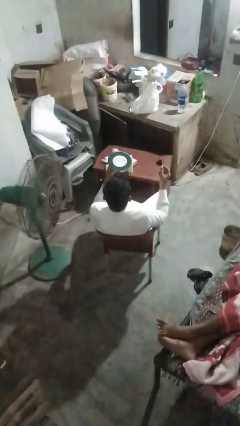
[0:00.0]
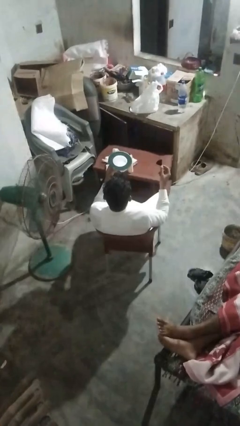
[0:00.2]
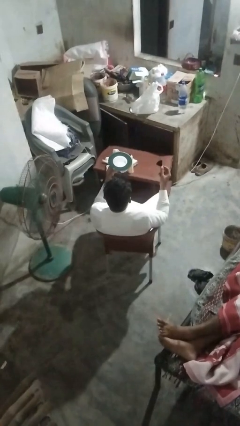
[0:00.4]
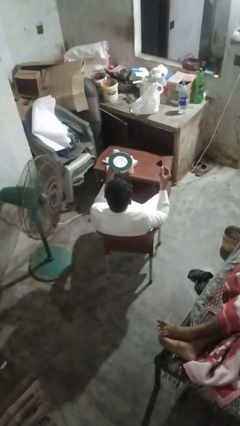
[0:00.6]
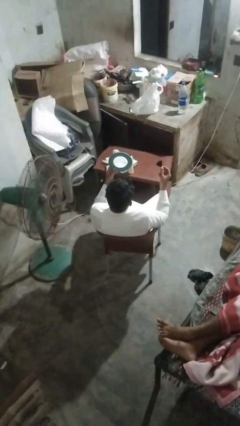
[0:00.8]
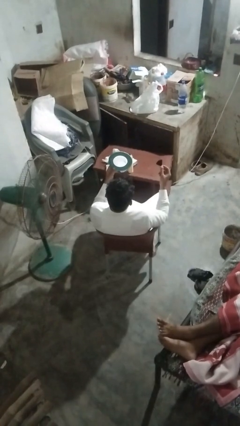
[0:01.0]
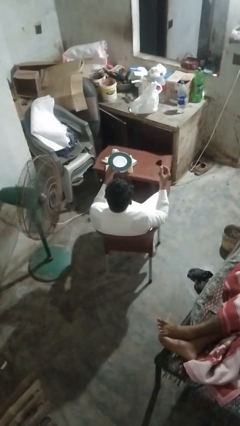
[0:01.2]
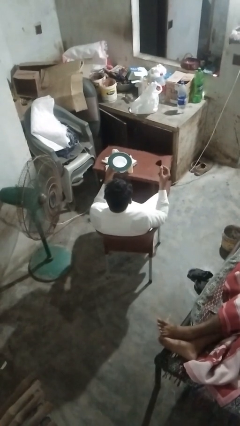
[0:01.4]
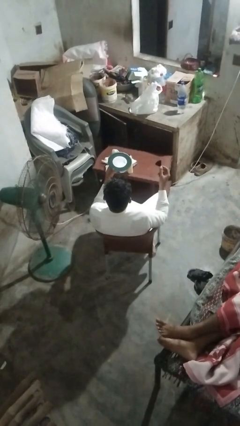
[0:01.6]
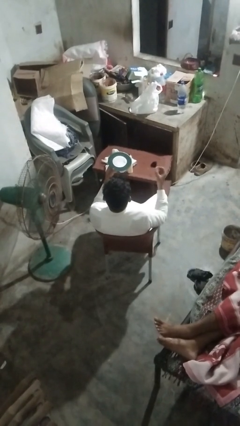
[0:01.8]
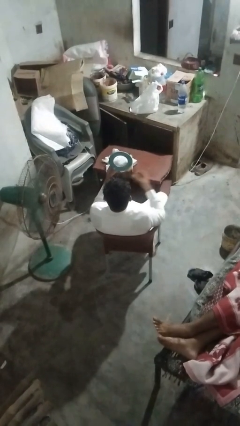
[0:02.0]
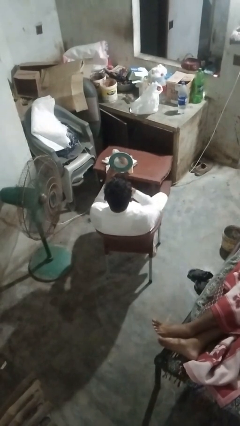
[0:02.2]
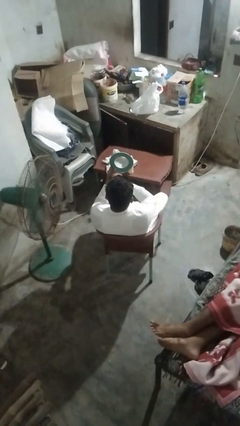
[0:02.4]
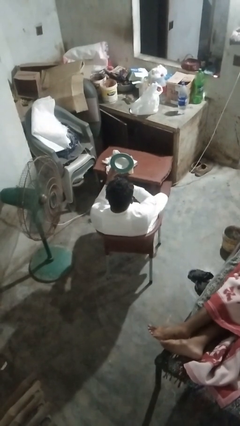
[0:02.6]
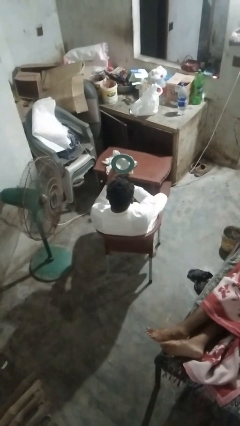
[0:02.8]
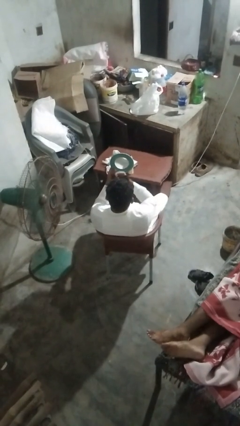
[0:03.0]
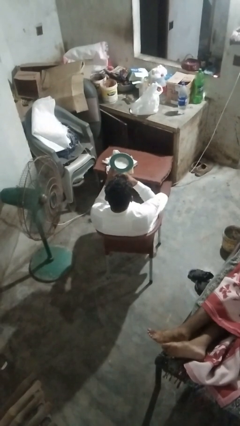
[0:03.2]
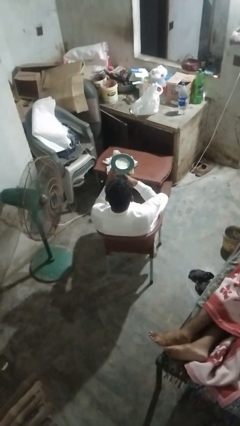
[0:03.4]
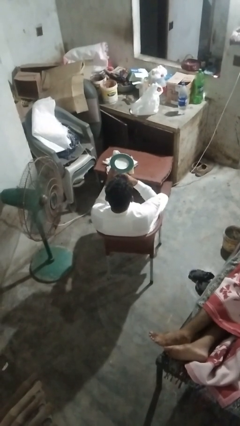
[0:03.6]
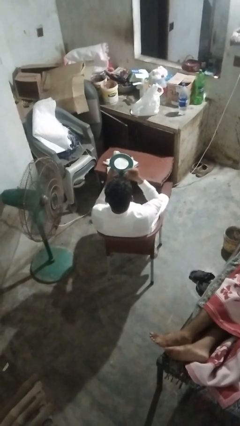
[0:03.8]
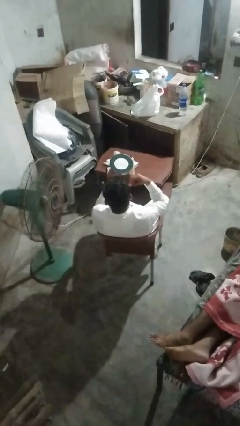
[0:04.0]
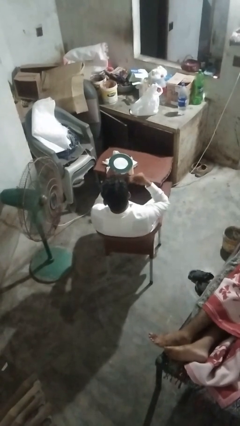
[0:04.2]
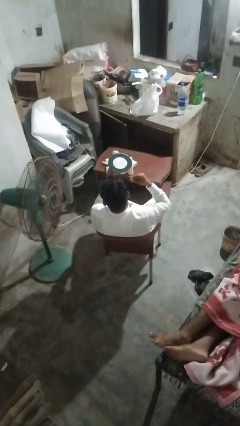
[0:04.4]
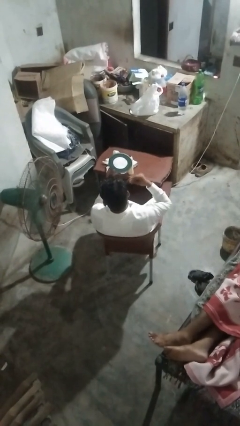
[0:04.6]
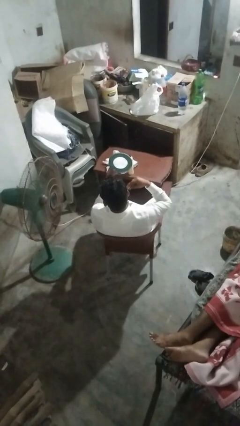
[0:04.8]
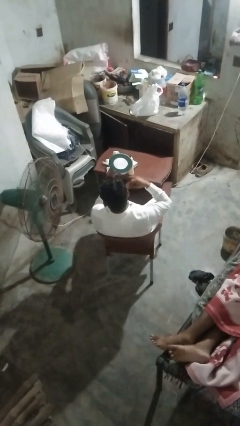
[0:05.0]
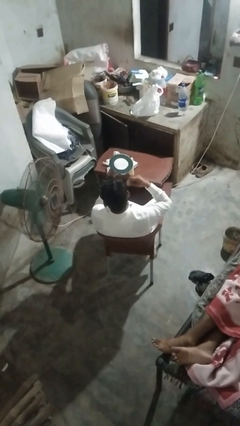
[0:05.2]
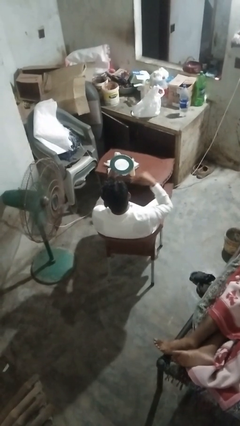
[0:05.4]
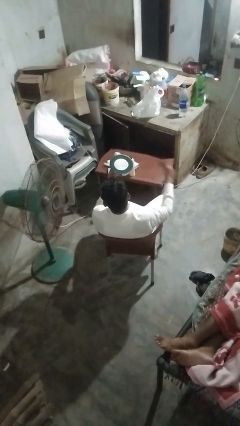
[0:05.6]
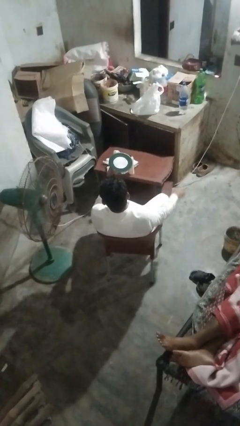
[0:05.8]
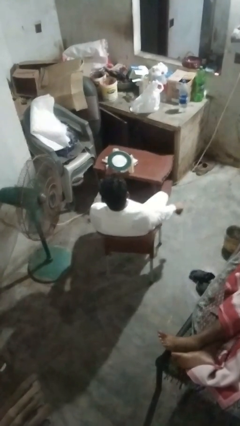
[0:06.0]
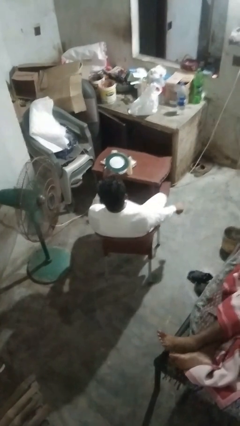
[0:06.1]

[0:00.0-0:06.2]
person applies foundation makeup

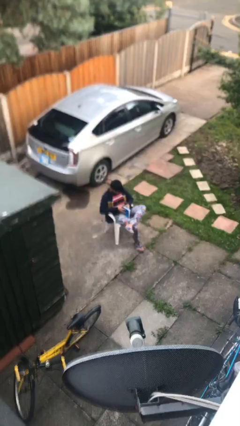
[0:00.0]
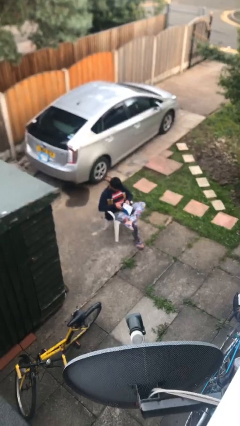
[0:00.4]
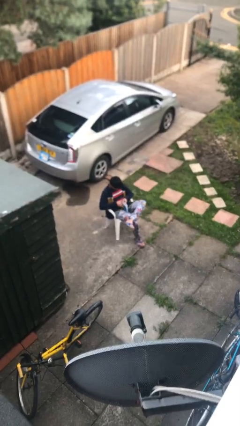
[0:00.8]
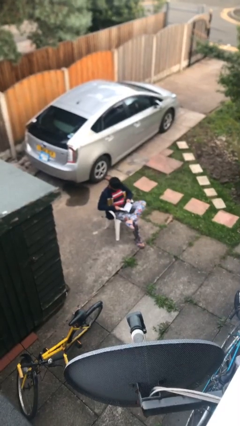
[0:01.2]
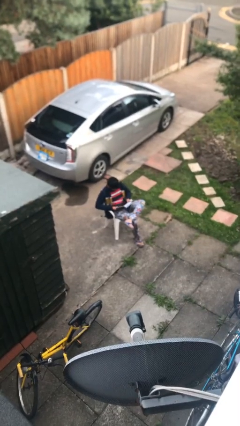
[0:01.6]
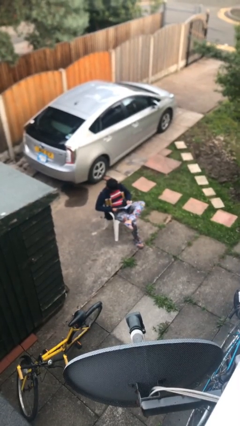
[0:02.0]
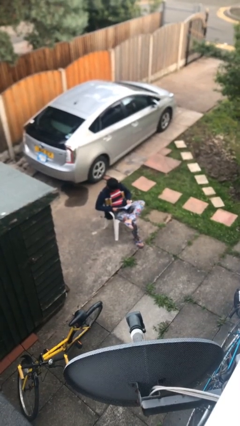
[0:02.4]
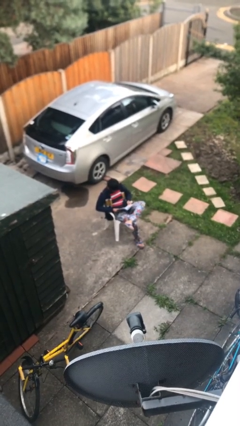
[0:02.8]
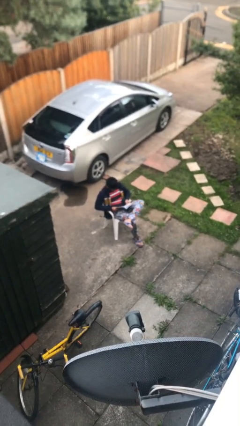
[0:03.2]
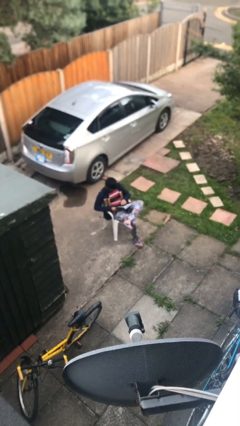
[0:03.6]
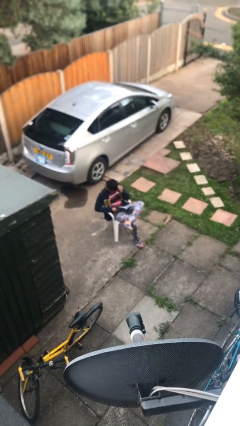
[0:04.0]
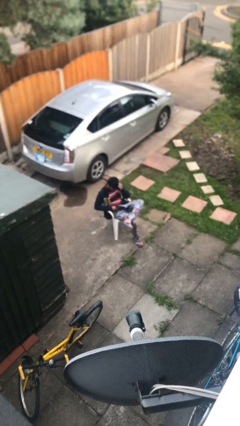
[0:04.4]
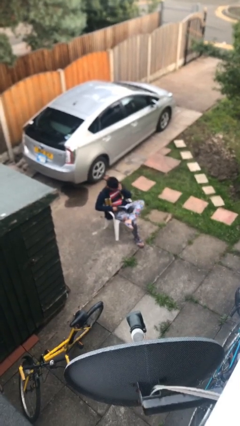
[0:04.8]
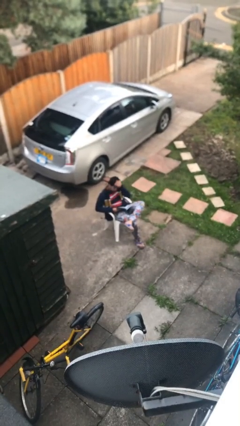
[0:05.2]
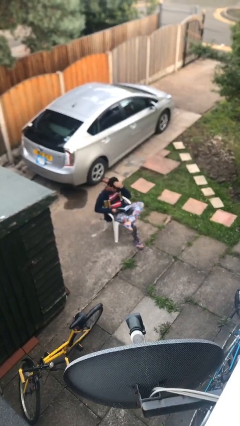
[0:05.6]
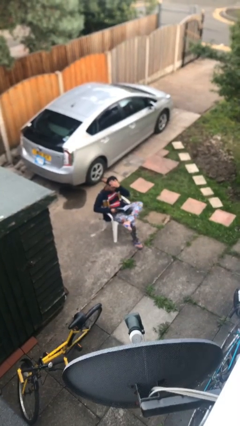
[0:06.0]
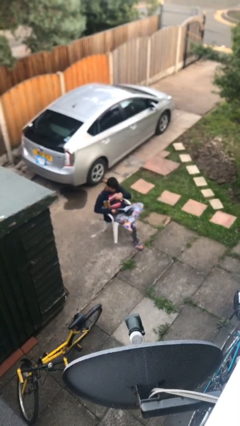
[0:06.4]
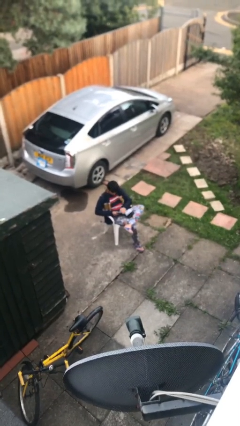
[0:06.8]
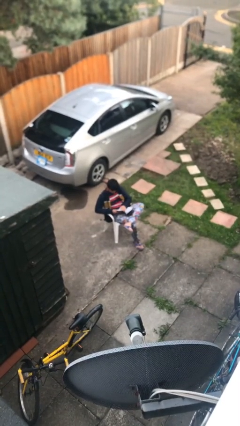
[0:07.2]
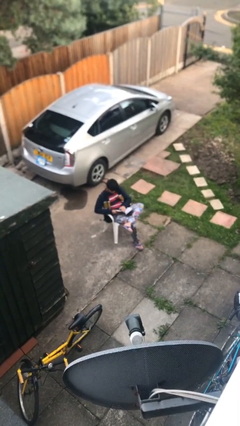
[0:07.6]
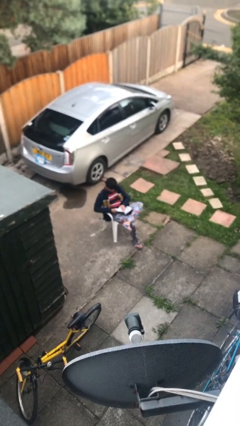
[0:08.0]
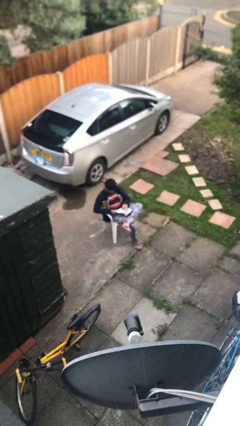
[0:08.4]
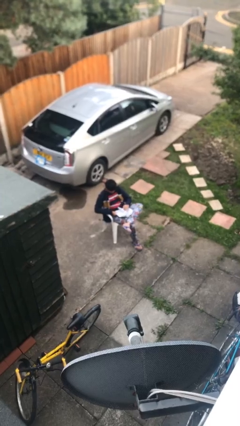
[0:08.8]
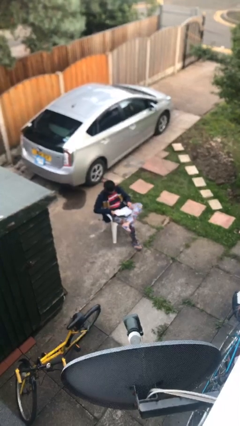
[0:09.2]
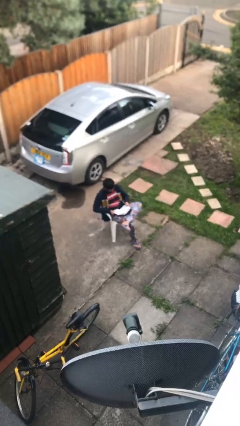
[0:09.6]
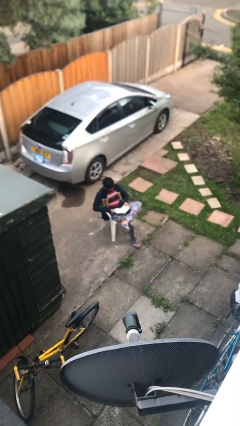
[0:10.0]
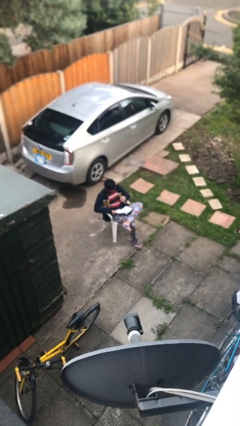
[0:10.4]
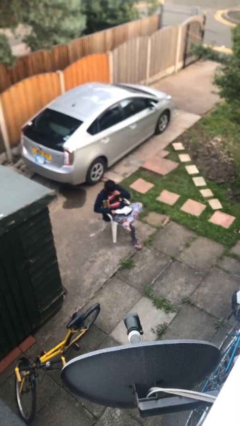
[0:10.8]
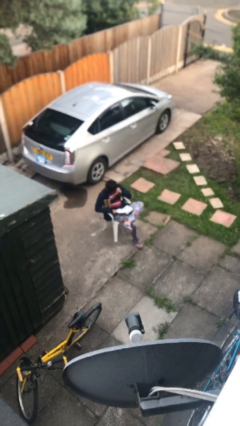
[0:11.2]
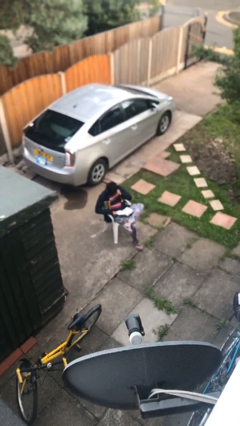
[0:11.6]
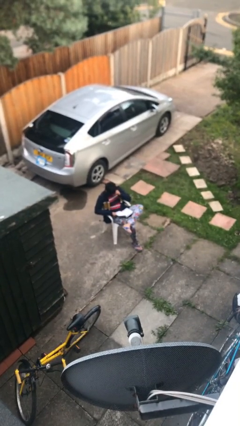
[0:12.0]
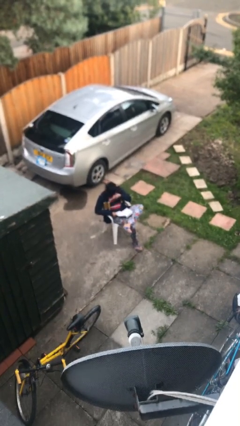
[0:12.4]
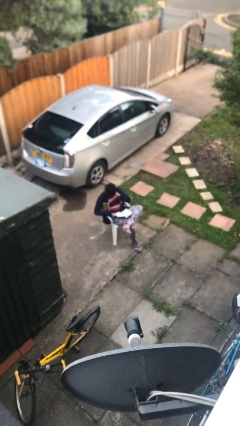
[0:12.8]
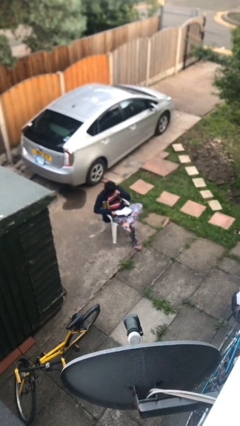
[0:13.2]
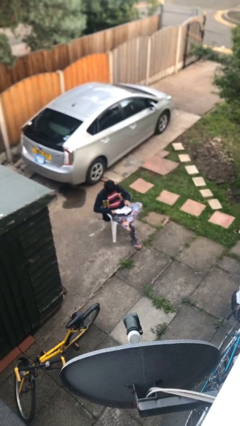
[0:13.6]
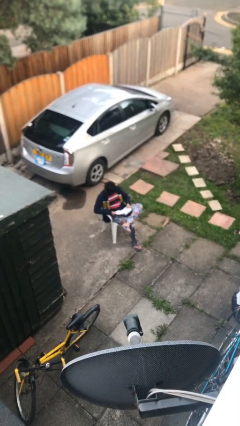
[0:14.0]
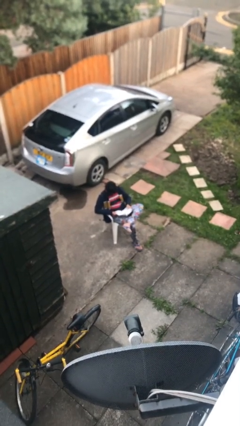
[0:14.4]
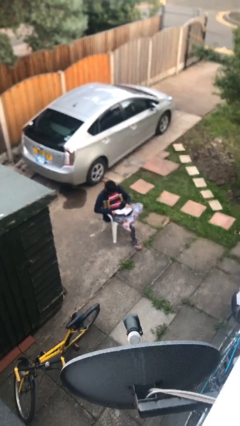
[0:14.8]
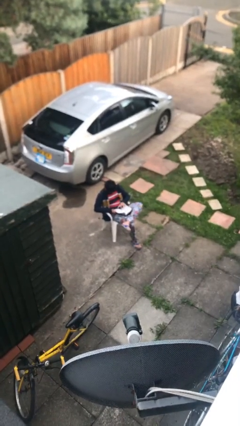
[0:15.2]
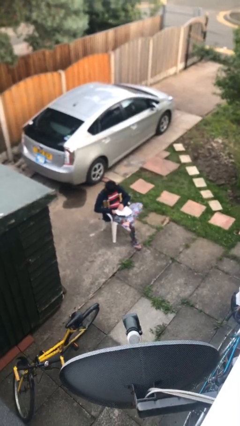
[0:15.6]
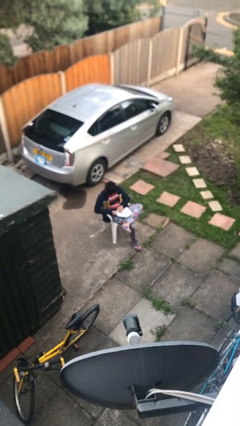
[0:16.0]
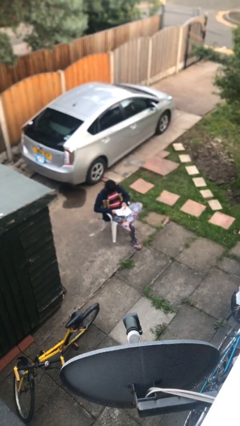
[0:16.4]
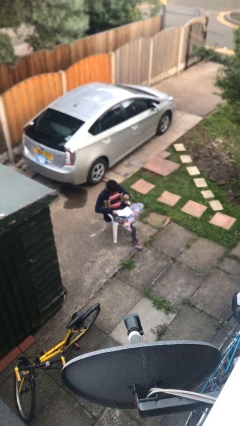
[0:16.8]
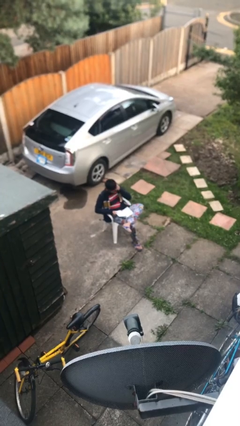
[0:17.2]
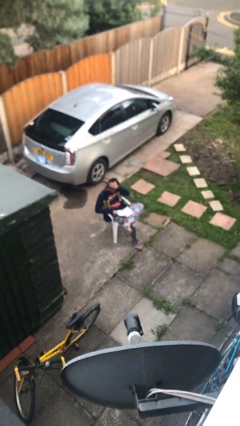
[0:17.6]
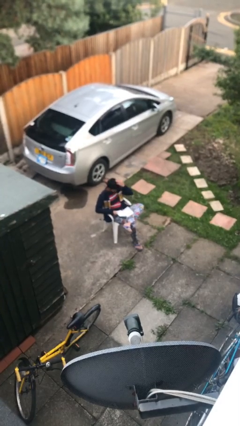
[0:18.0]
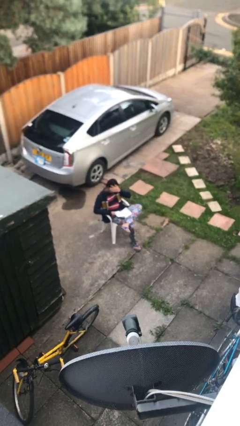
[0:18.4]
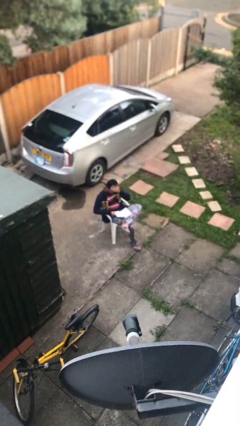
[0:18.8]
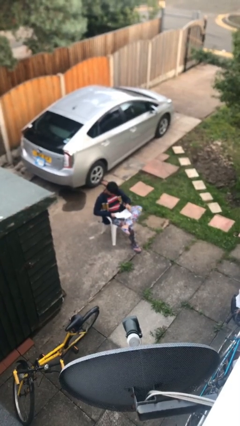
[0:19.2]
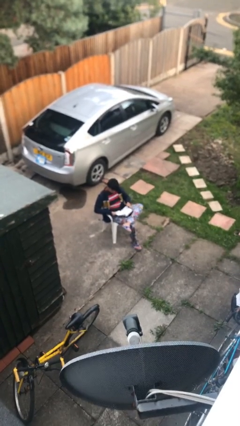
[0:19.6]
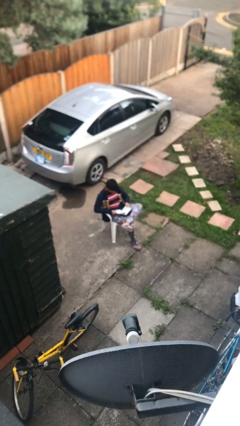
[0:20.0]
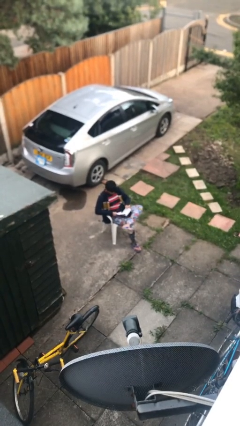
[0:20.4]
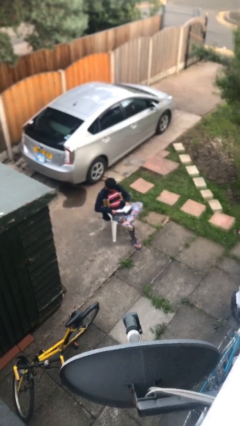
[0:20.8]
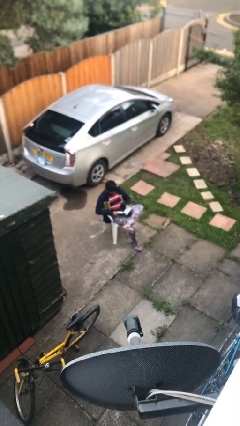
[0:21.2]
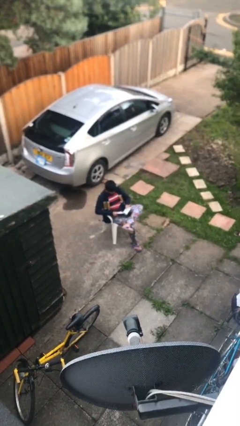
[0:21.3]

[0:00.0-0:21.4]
person reads document

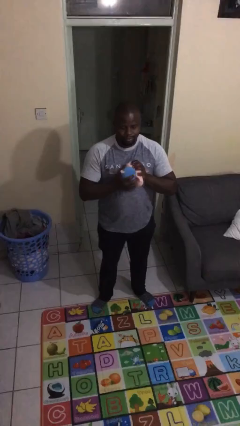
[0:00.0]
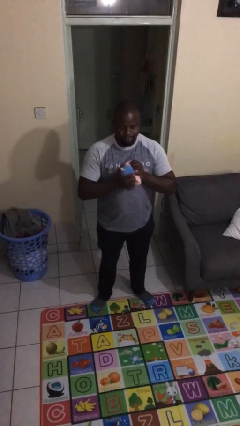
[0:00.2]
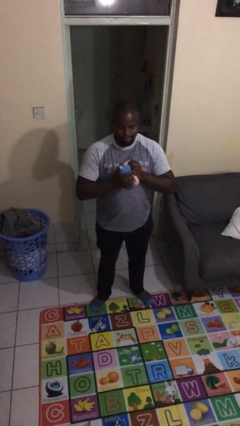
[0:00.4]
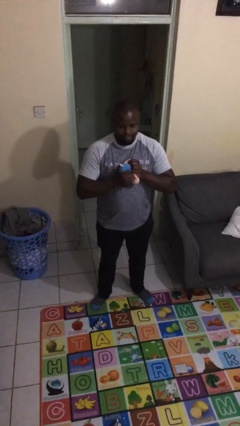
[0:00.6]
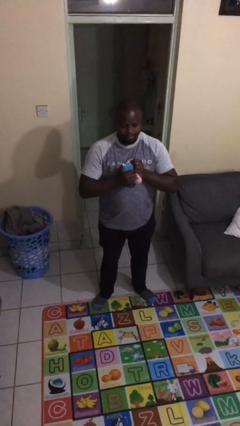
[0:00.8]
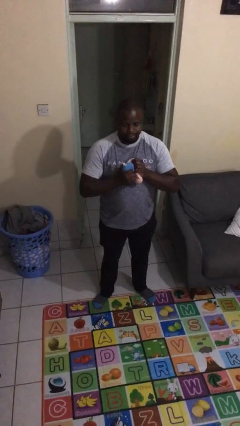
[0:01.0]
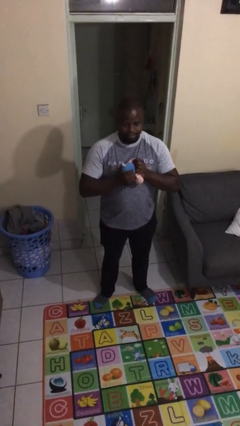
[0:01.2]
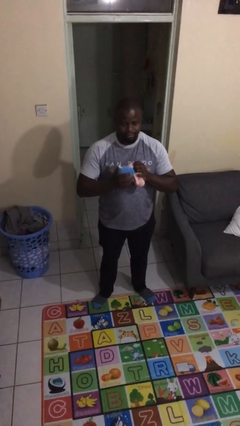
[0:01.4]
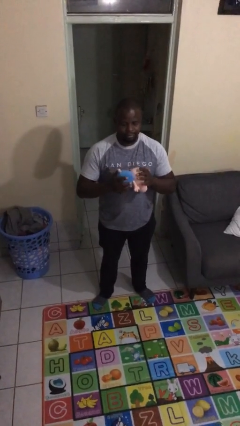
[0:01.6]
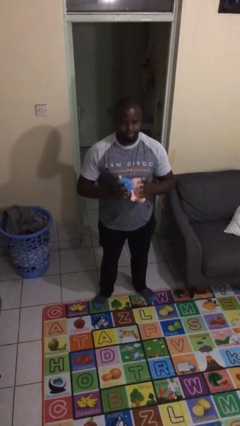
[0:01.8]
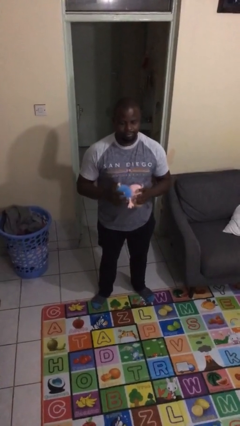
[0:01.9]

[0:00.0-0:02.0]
person squeezes object
